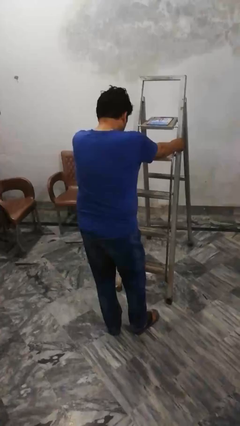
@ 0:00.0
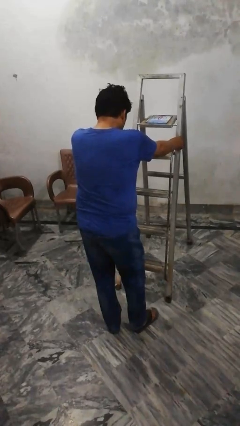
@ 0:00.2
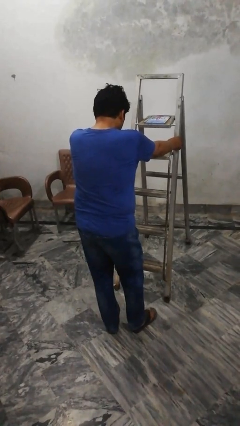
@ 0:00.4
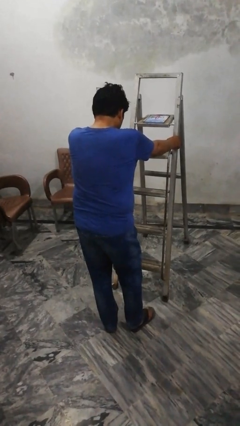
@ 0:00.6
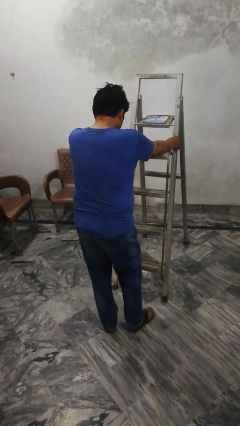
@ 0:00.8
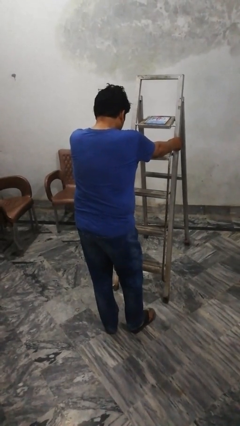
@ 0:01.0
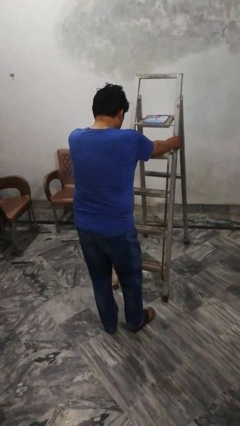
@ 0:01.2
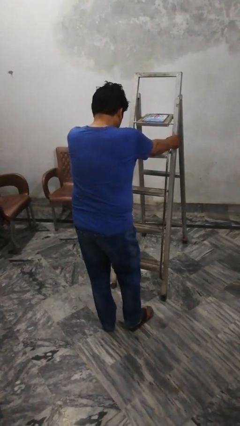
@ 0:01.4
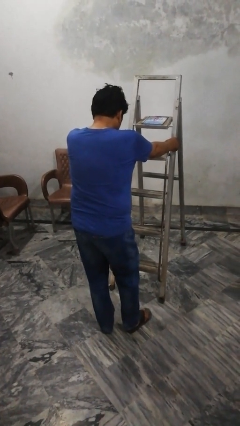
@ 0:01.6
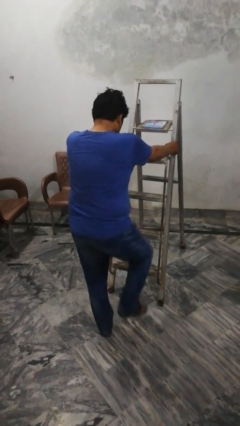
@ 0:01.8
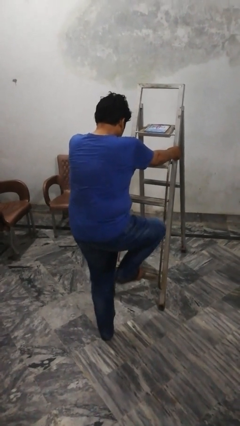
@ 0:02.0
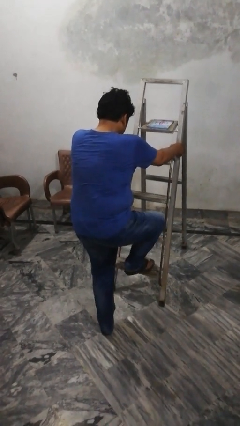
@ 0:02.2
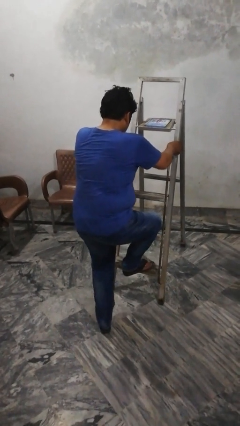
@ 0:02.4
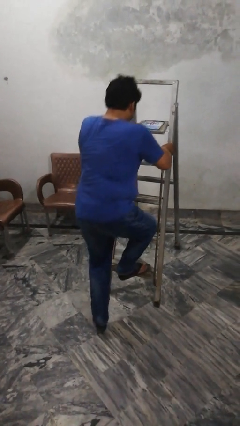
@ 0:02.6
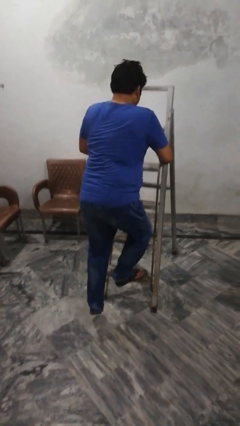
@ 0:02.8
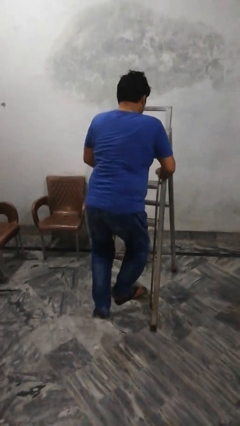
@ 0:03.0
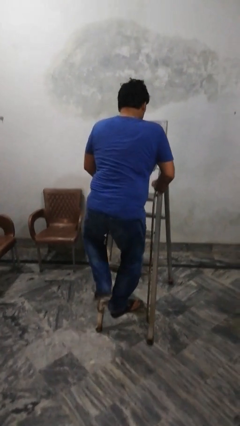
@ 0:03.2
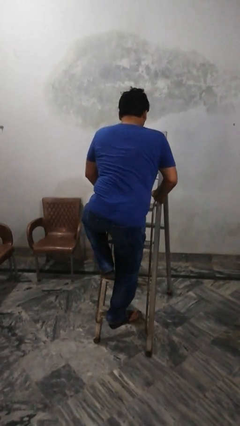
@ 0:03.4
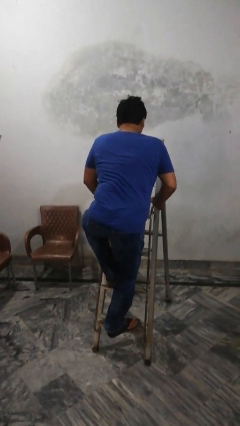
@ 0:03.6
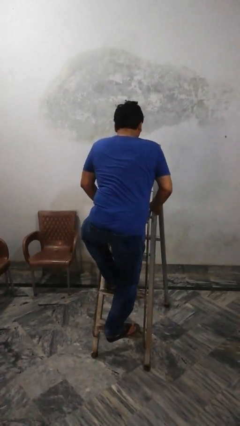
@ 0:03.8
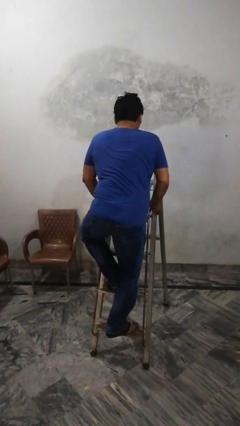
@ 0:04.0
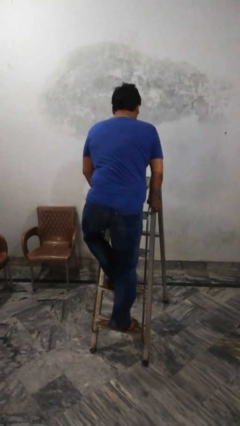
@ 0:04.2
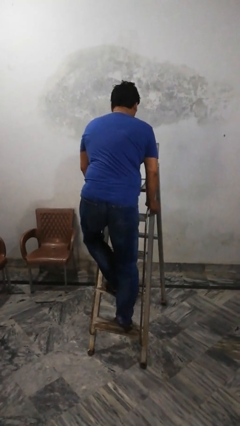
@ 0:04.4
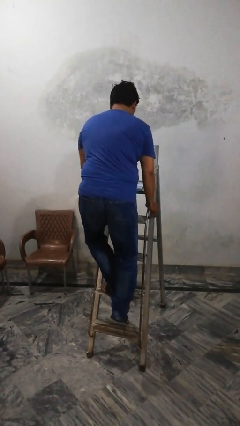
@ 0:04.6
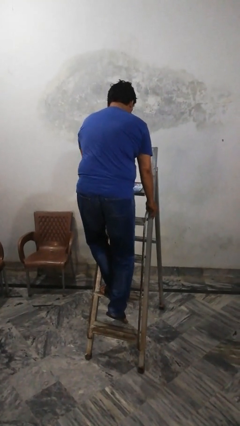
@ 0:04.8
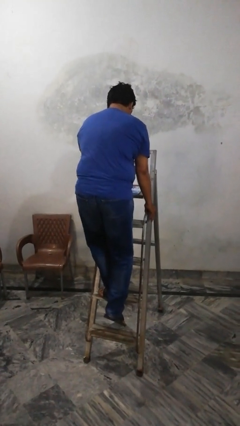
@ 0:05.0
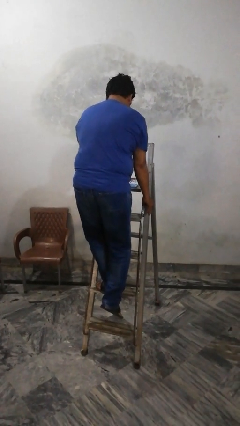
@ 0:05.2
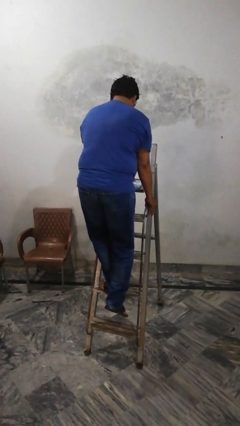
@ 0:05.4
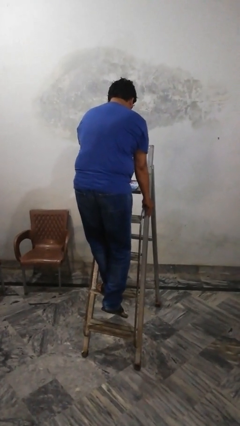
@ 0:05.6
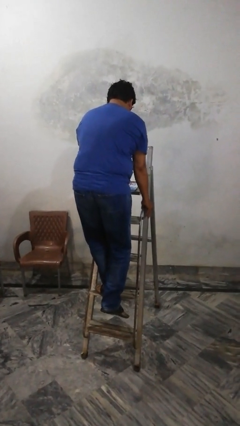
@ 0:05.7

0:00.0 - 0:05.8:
person climbs up ladder

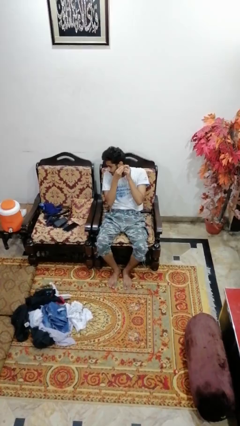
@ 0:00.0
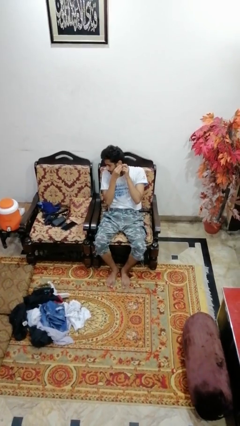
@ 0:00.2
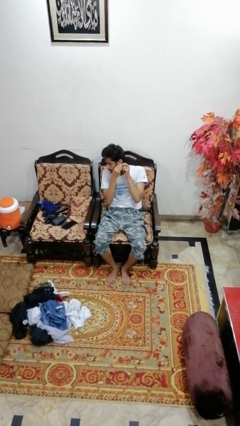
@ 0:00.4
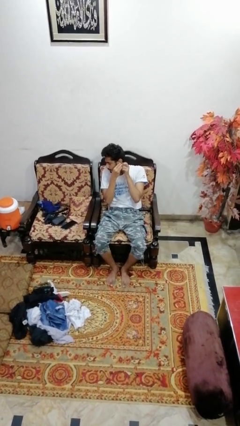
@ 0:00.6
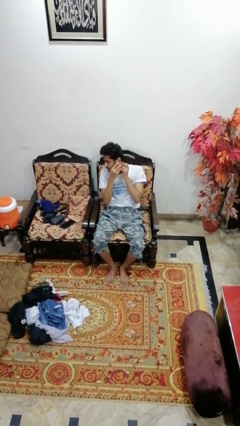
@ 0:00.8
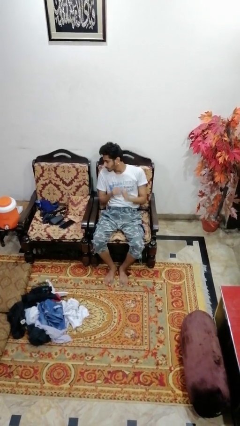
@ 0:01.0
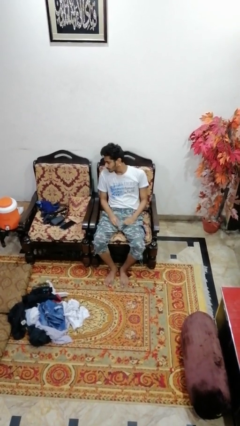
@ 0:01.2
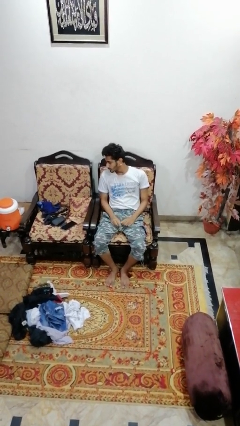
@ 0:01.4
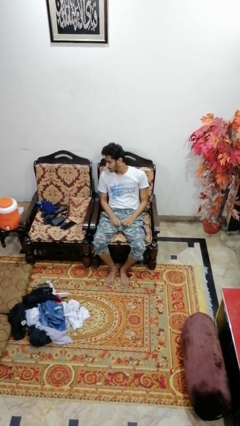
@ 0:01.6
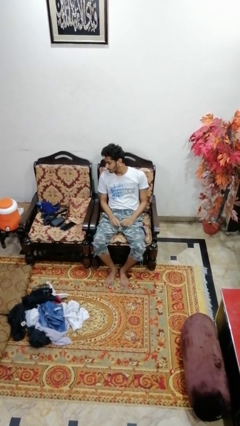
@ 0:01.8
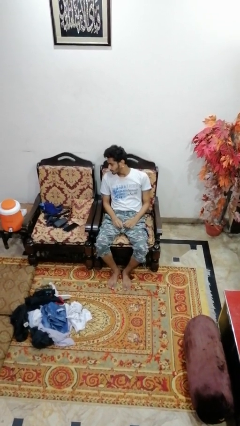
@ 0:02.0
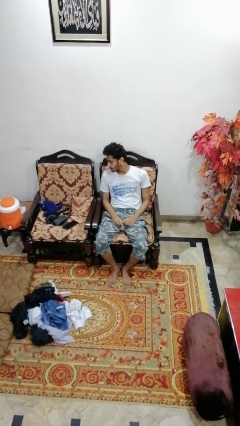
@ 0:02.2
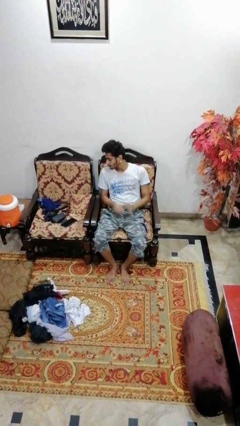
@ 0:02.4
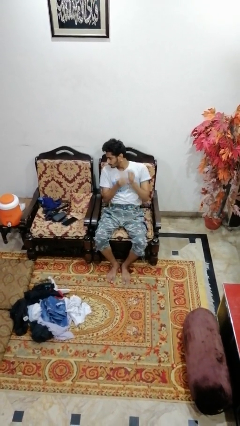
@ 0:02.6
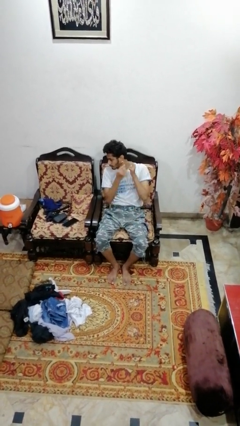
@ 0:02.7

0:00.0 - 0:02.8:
person puts on earrings

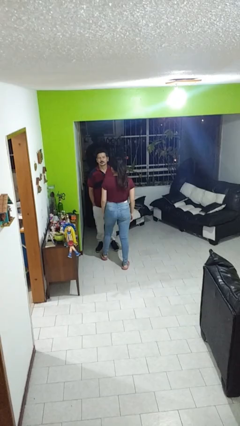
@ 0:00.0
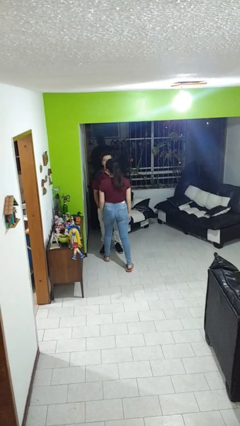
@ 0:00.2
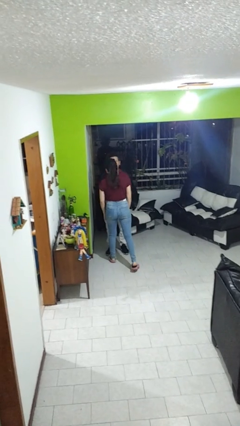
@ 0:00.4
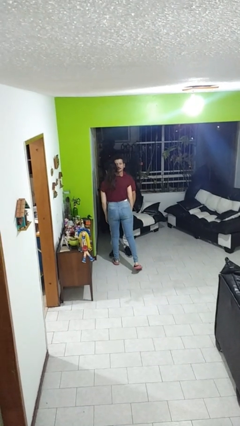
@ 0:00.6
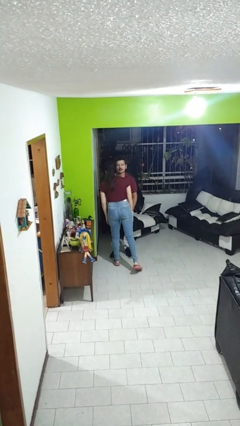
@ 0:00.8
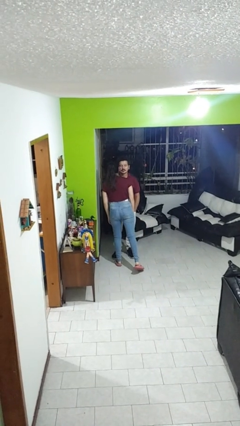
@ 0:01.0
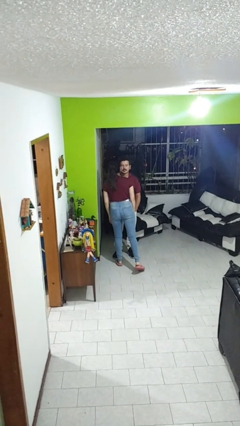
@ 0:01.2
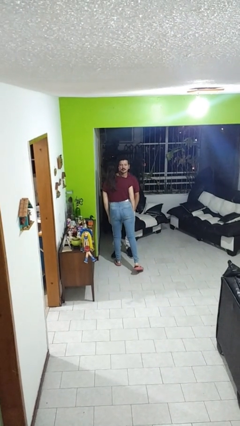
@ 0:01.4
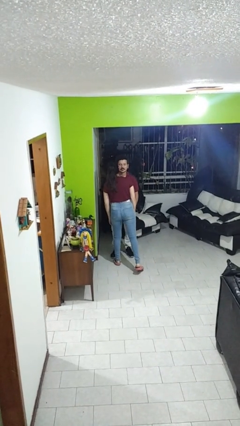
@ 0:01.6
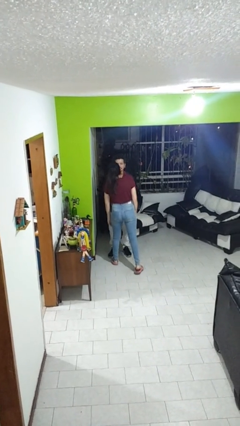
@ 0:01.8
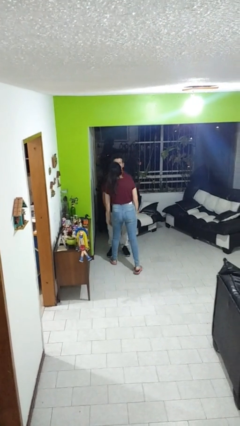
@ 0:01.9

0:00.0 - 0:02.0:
person kisses cheek of person

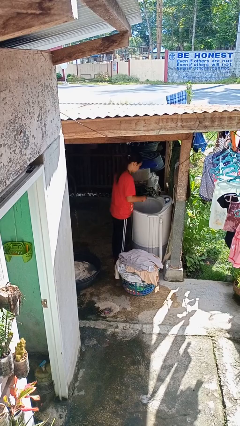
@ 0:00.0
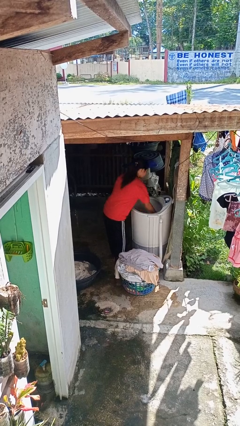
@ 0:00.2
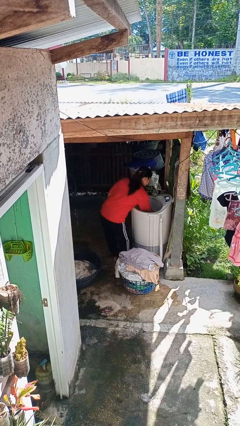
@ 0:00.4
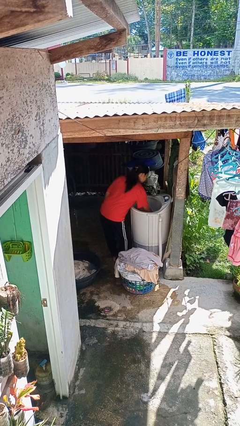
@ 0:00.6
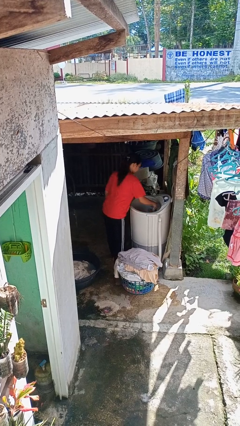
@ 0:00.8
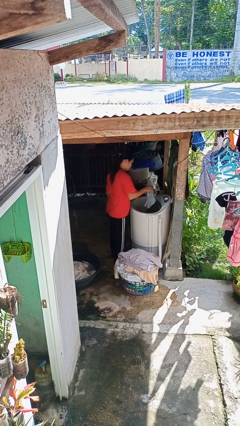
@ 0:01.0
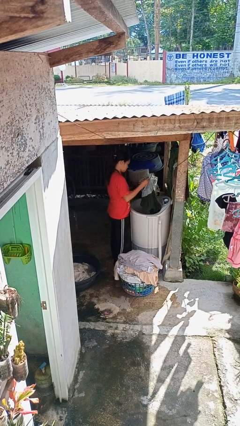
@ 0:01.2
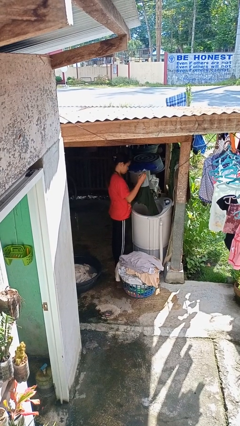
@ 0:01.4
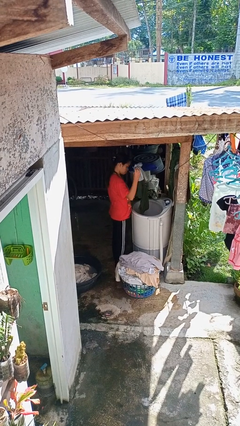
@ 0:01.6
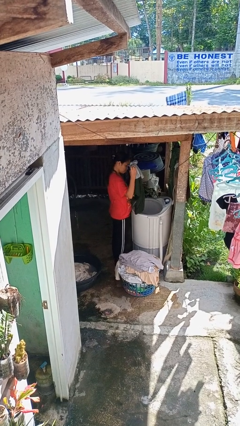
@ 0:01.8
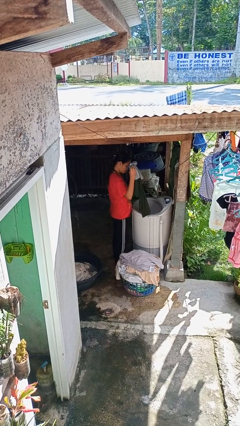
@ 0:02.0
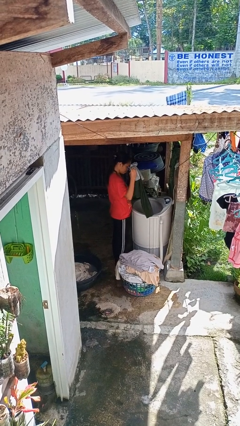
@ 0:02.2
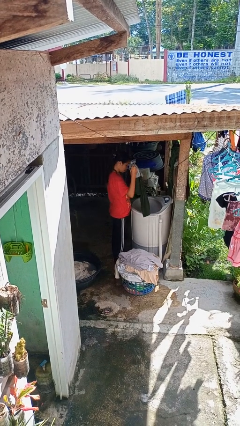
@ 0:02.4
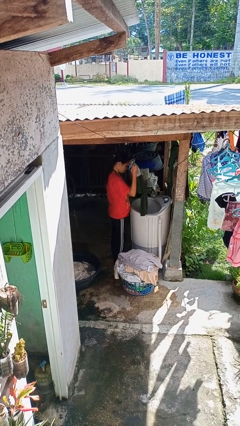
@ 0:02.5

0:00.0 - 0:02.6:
person unloads clotheswasher

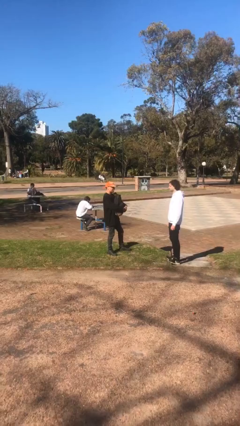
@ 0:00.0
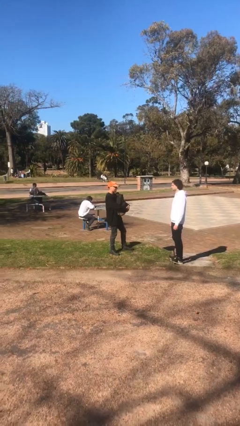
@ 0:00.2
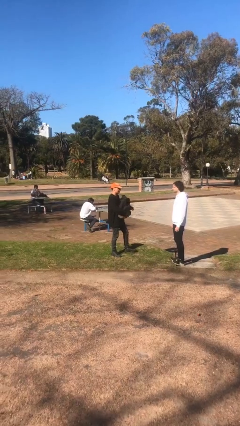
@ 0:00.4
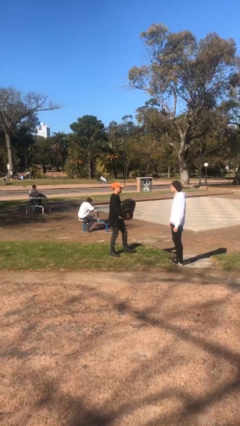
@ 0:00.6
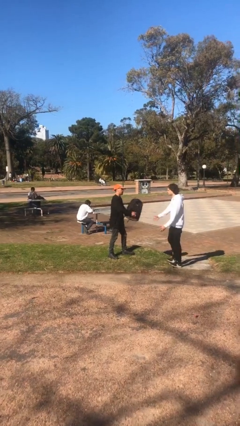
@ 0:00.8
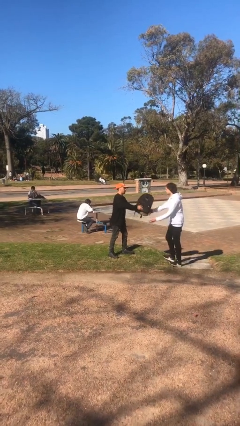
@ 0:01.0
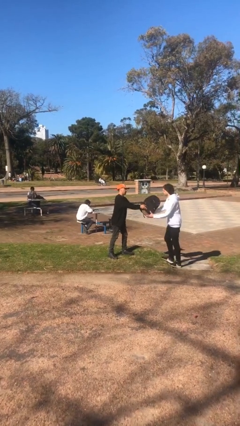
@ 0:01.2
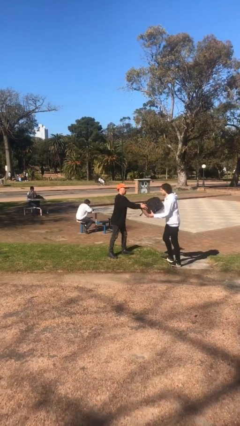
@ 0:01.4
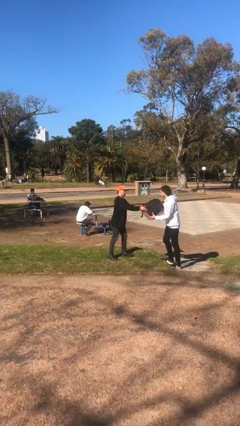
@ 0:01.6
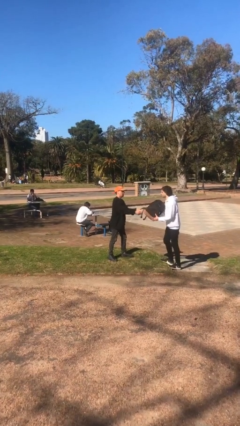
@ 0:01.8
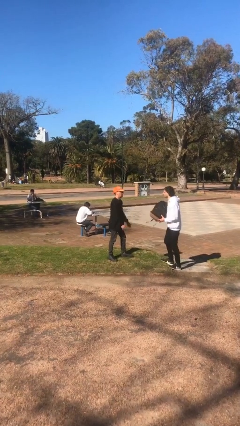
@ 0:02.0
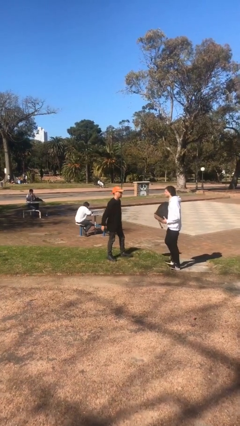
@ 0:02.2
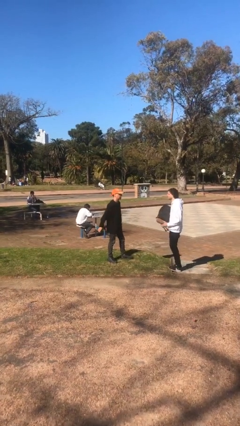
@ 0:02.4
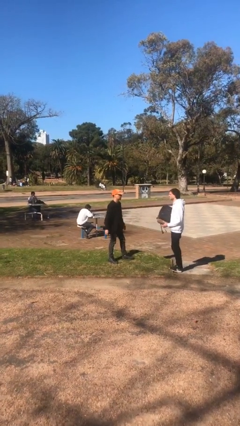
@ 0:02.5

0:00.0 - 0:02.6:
person transfers object to person

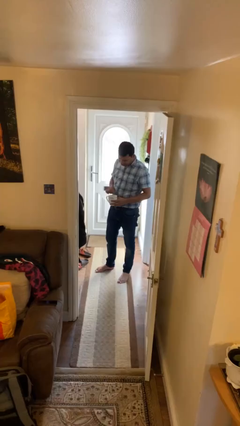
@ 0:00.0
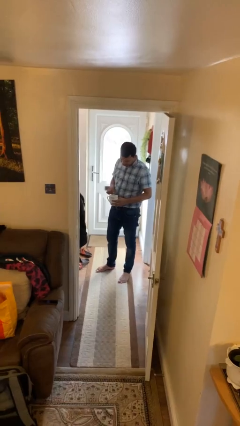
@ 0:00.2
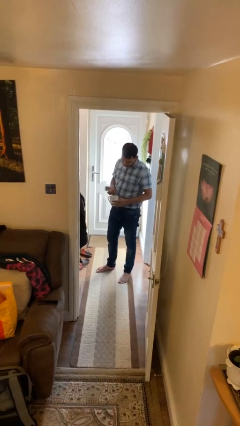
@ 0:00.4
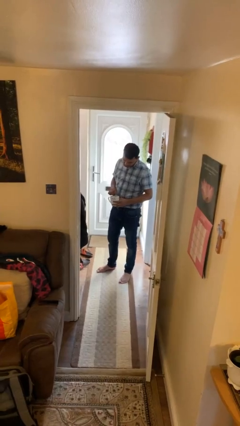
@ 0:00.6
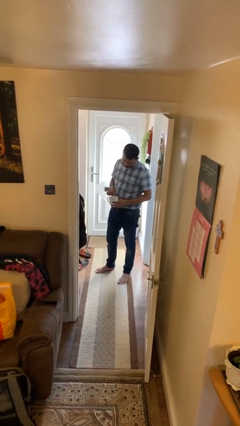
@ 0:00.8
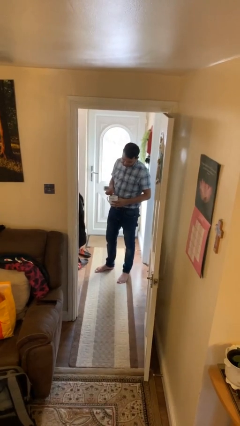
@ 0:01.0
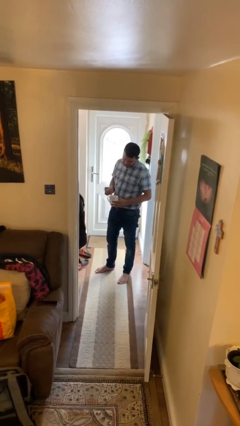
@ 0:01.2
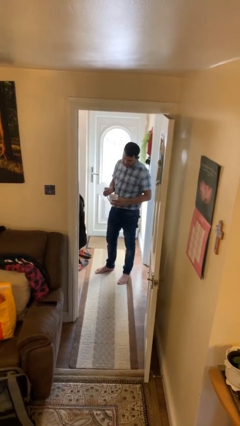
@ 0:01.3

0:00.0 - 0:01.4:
person stirs mug
